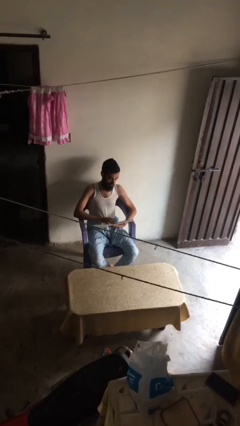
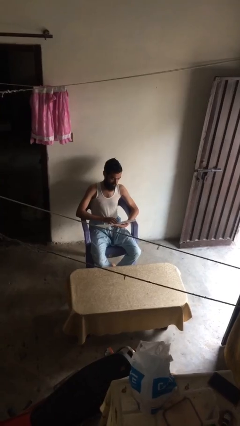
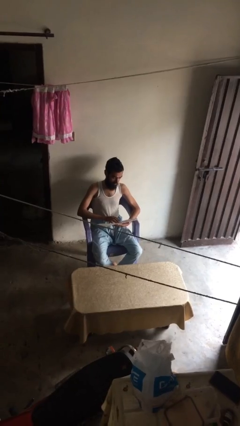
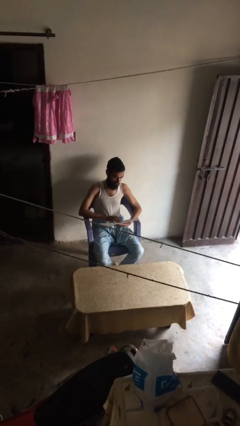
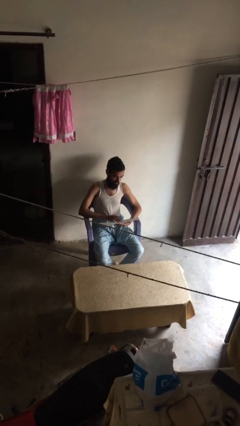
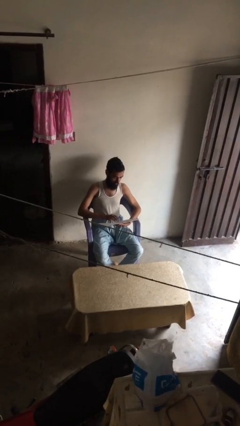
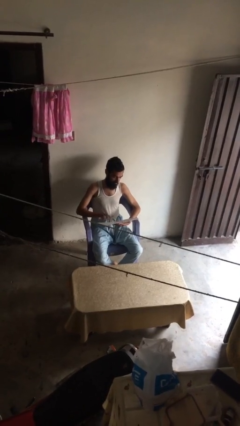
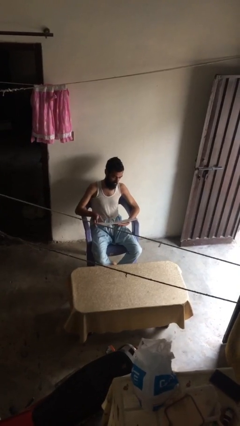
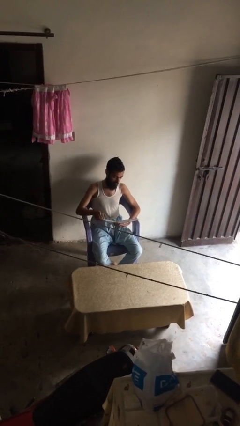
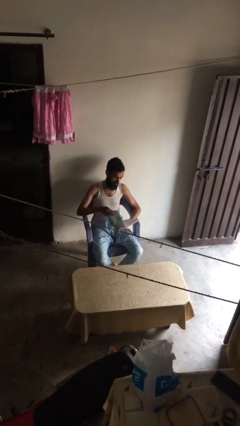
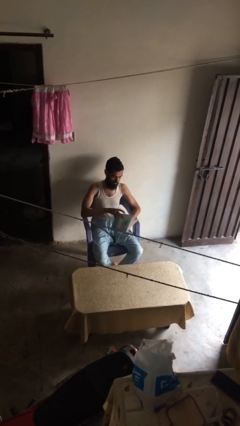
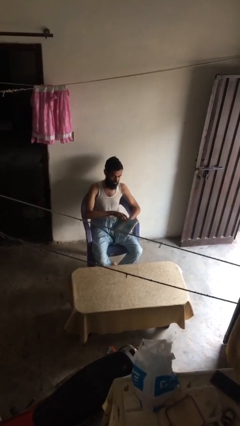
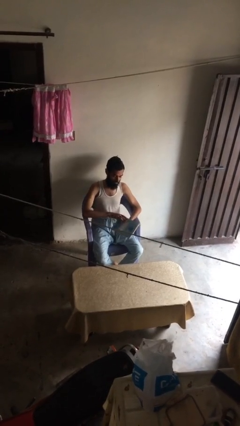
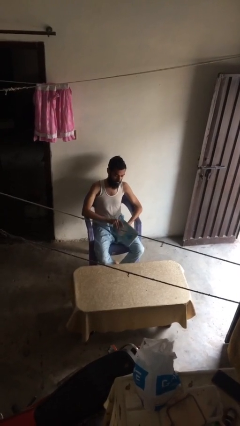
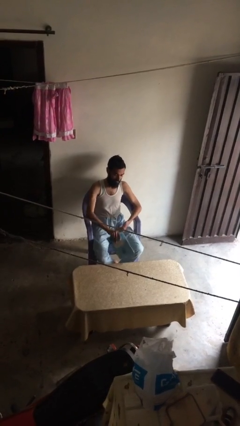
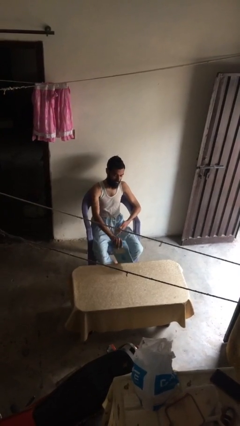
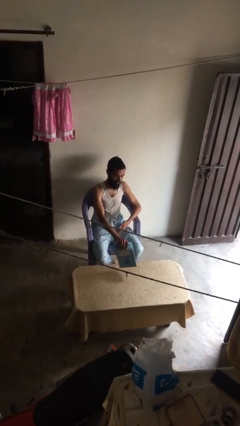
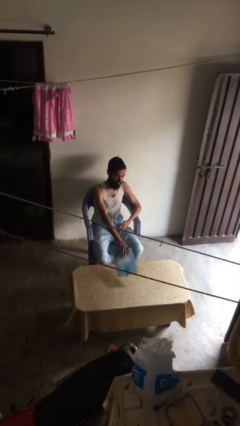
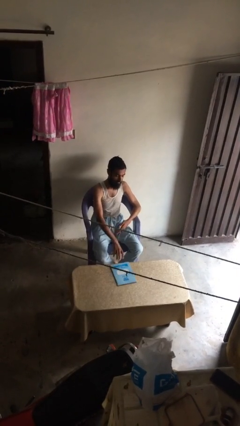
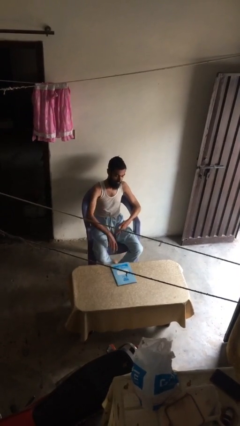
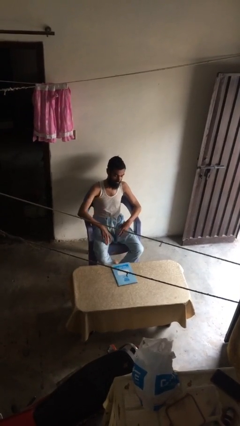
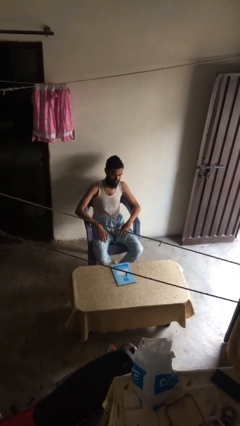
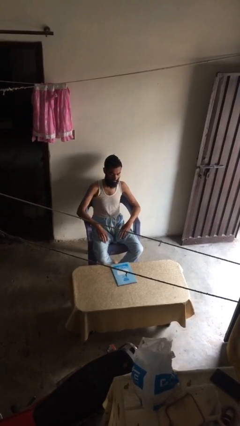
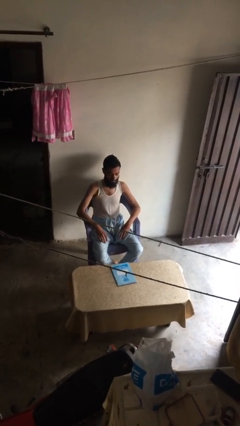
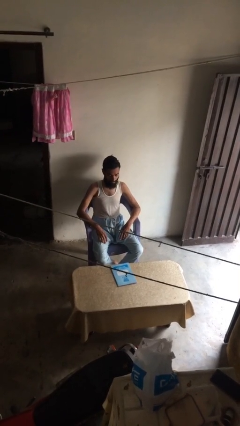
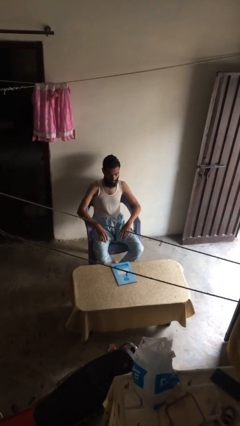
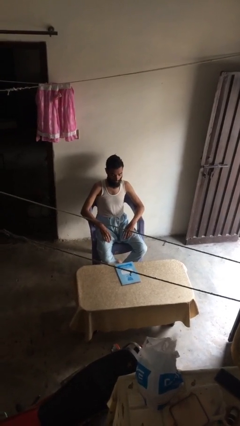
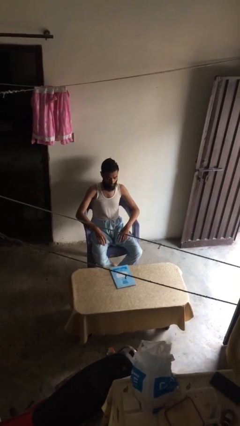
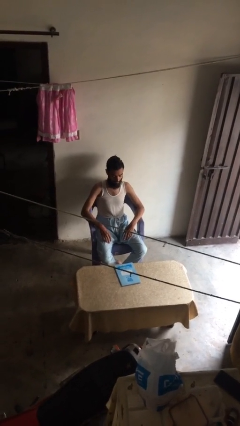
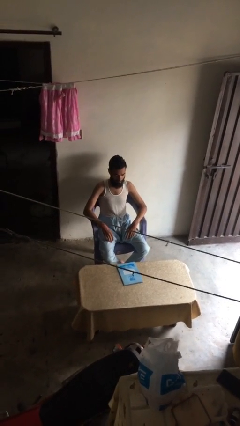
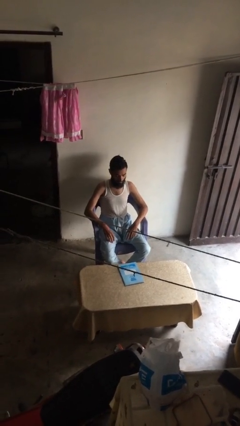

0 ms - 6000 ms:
person puts down object on table

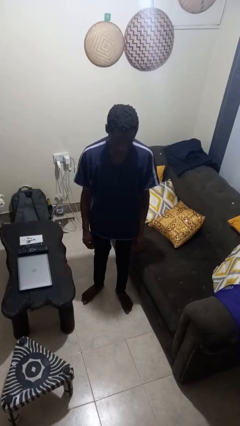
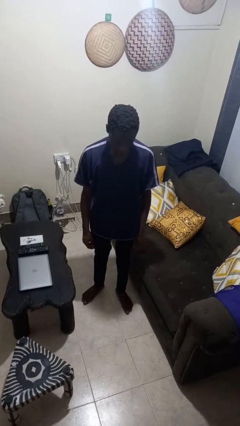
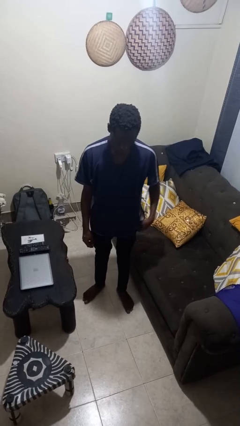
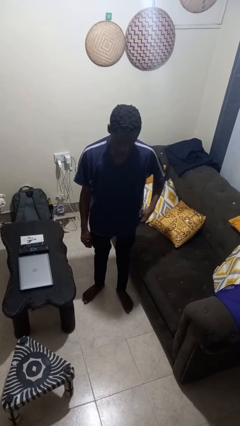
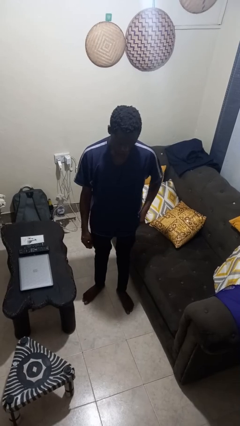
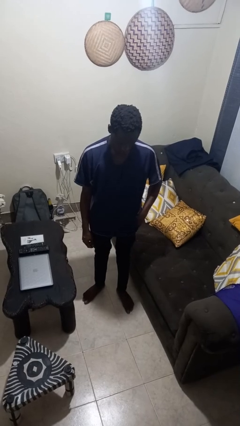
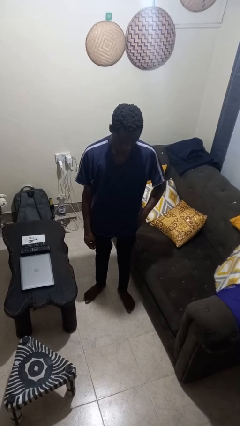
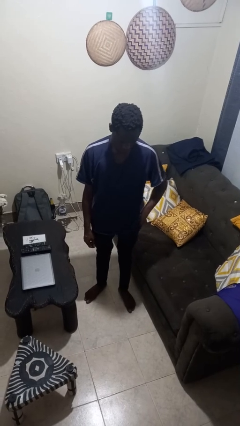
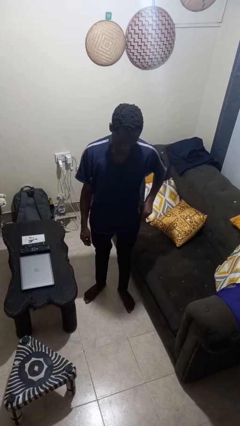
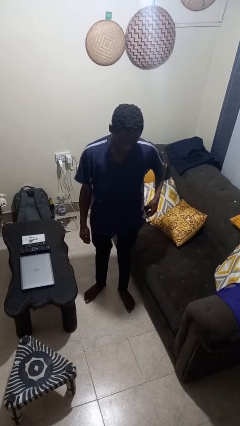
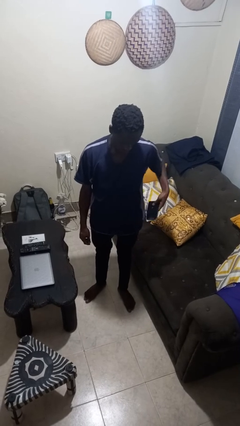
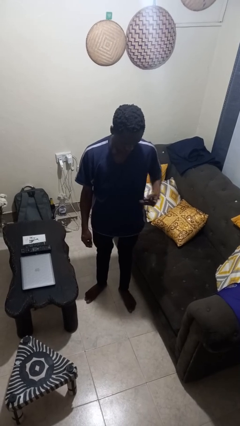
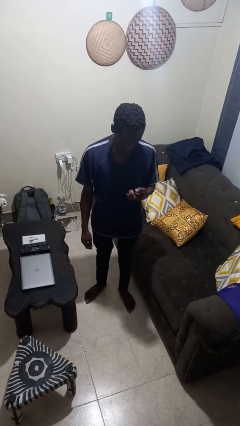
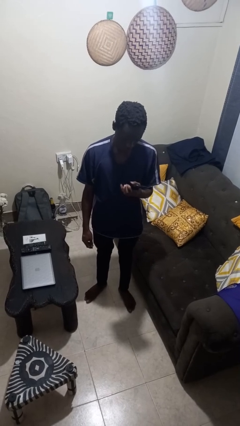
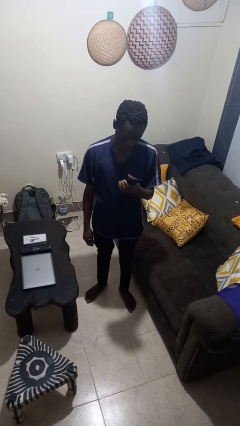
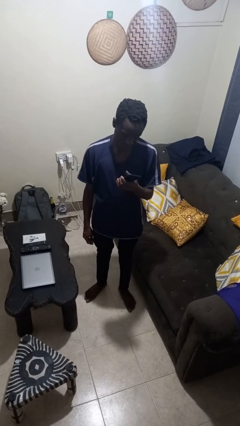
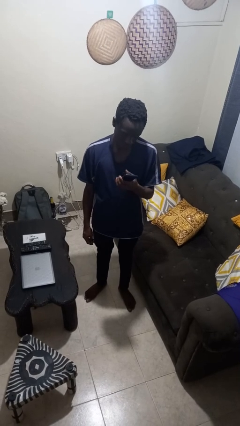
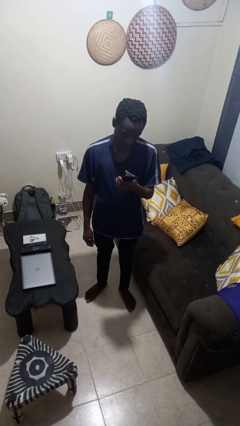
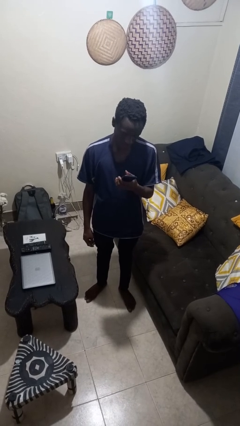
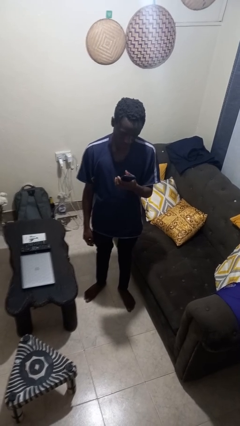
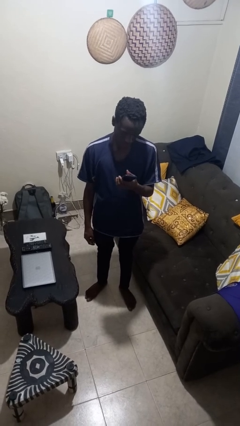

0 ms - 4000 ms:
person takes phone from pocket

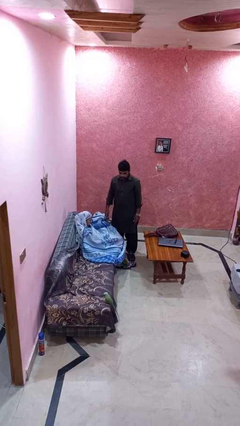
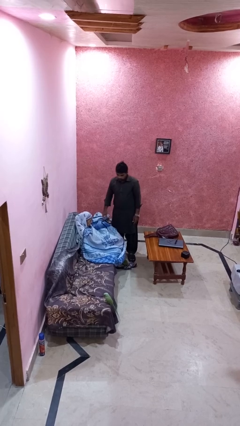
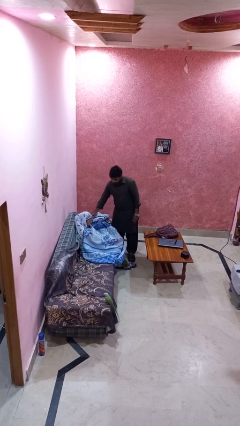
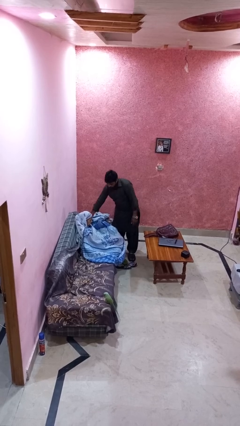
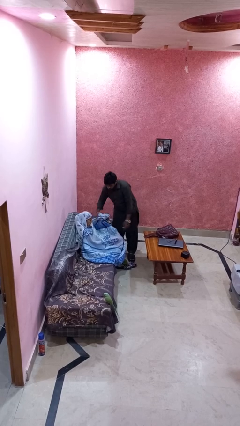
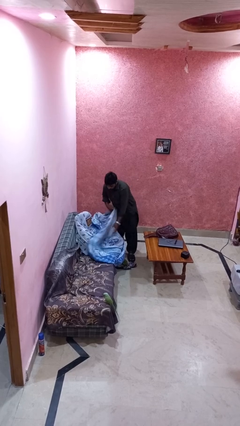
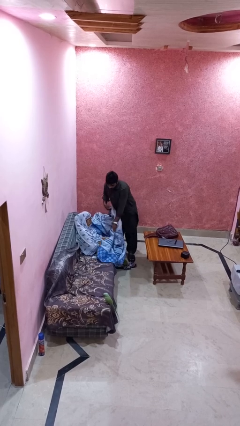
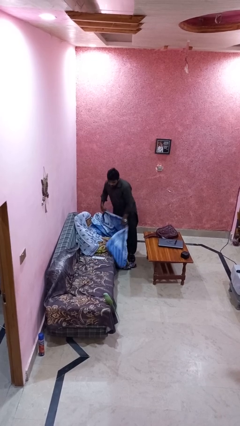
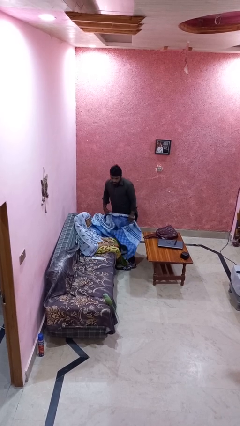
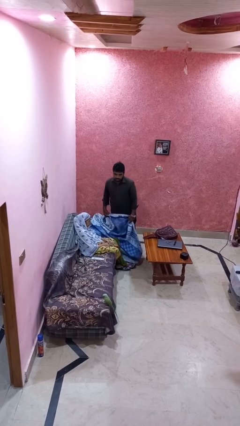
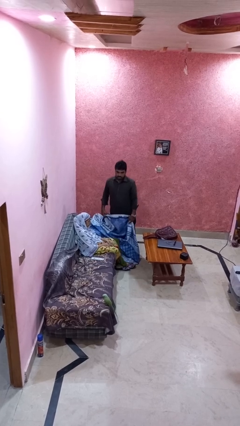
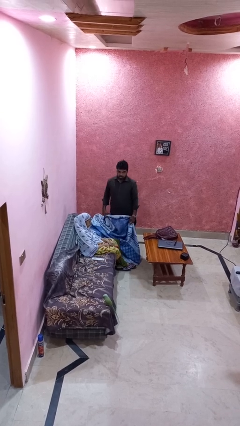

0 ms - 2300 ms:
person uncovers friend with blanket

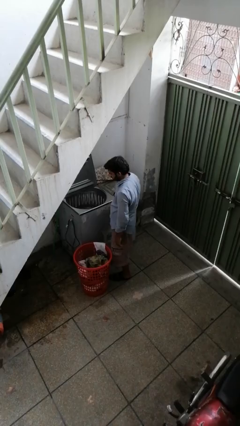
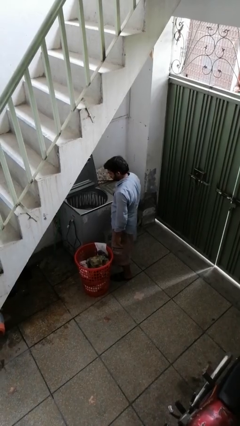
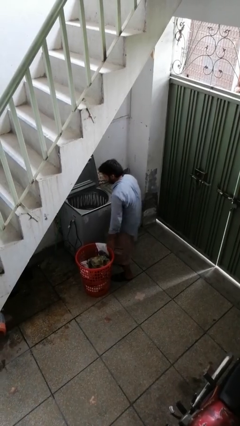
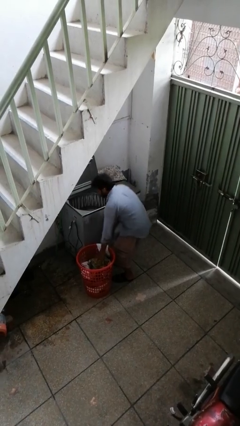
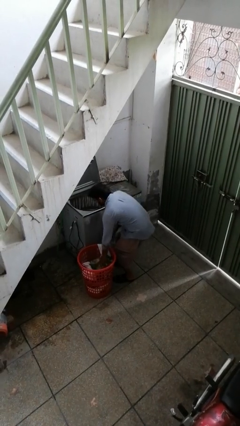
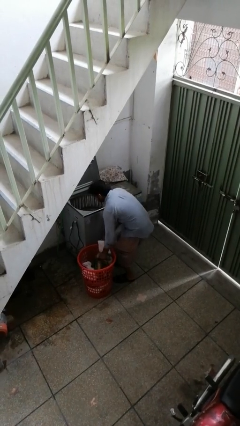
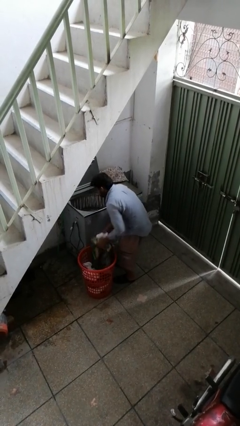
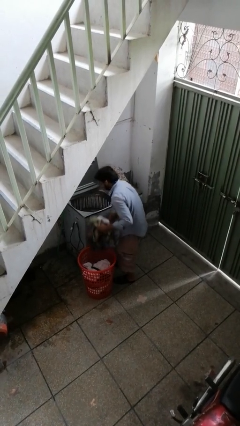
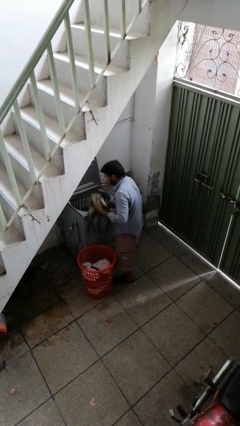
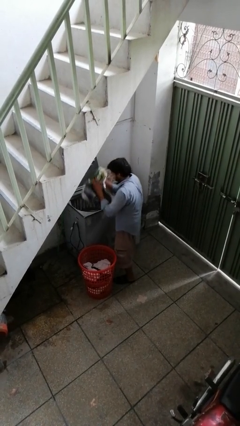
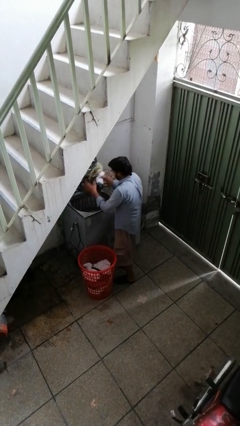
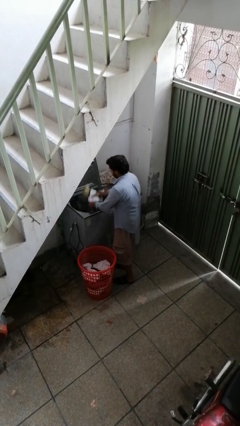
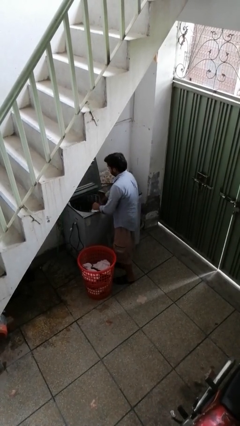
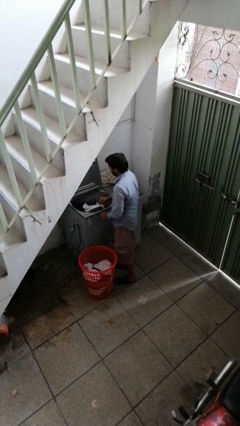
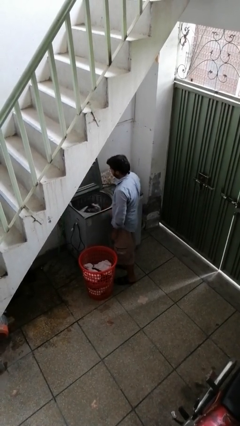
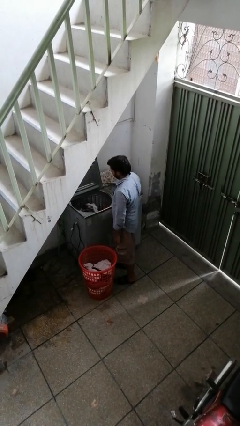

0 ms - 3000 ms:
person loads clotheswasher

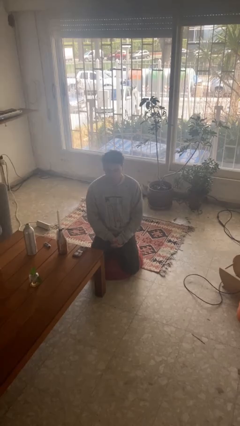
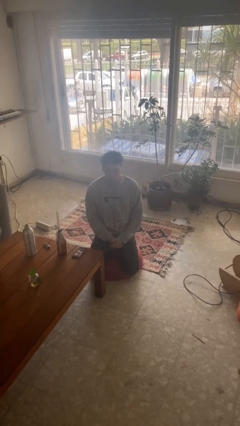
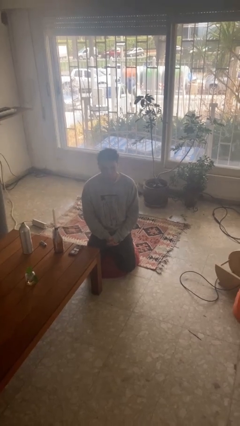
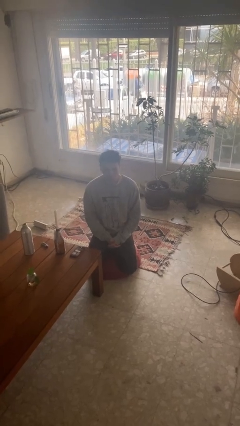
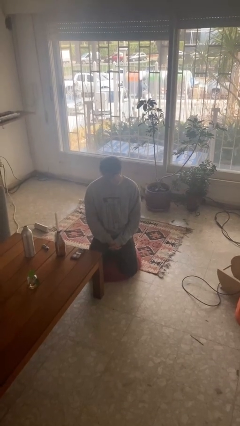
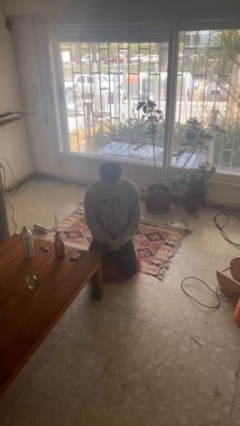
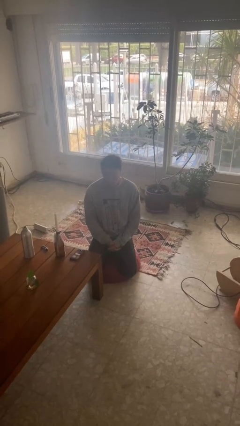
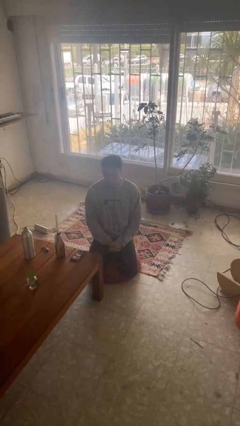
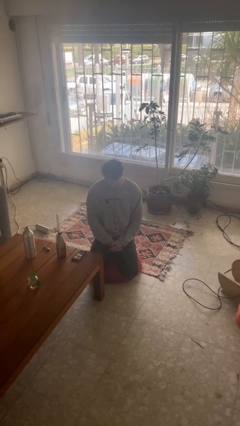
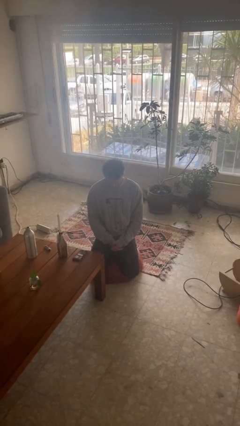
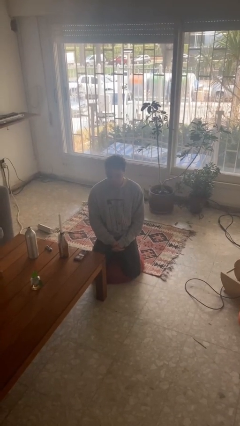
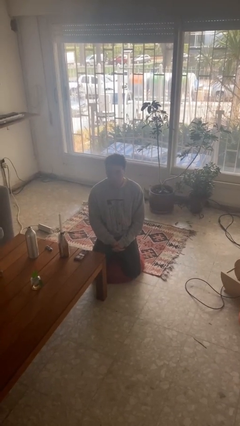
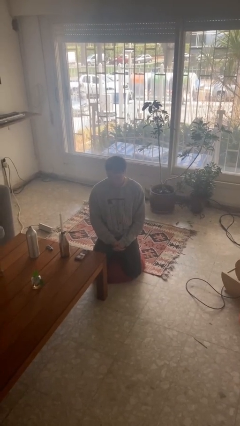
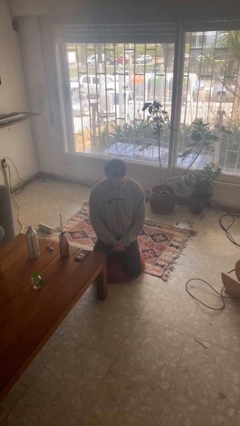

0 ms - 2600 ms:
person nods head

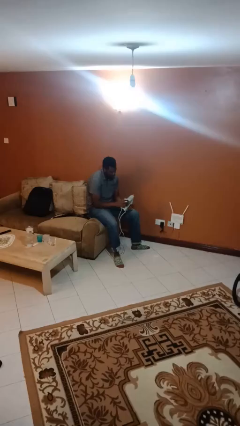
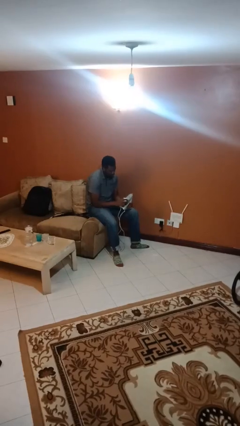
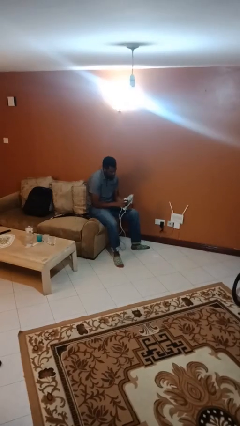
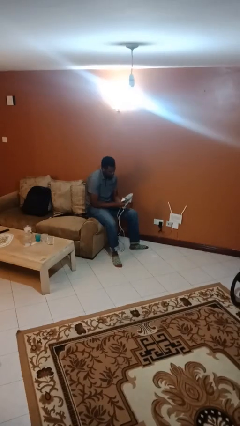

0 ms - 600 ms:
person plugs into electrical socket
